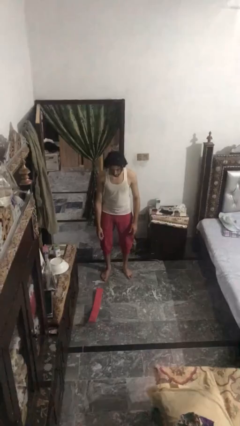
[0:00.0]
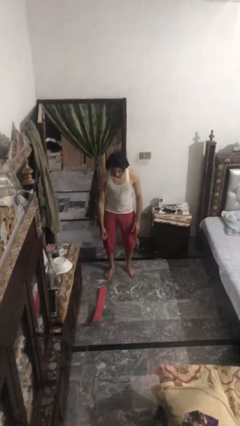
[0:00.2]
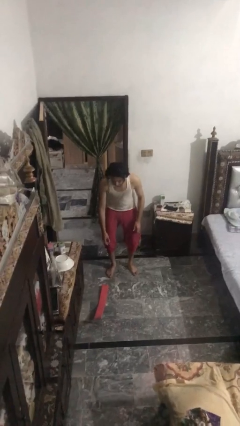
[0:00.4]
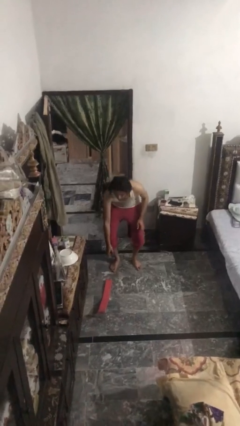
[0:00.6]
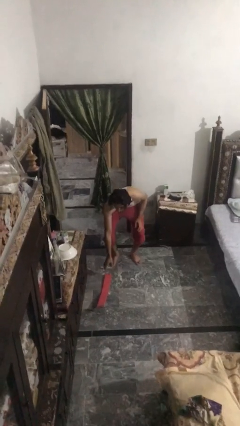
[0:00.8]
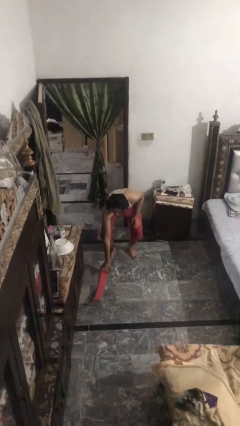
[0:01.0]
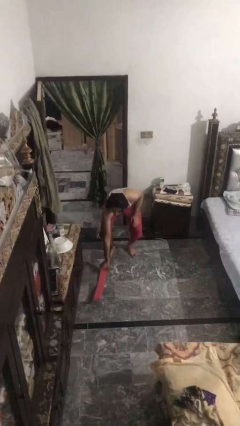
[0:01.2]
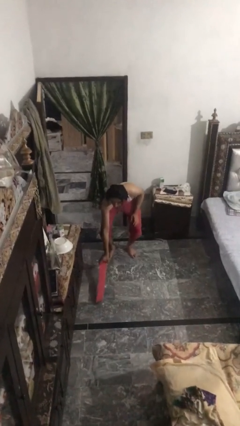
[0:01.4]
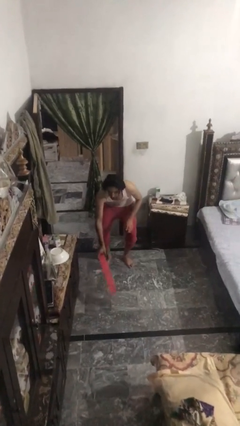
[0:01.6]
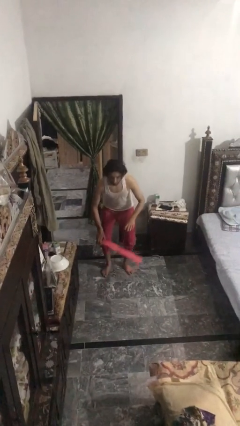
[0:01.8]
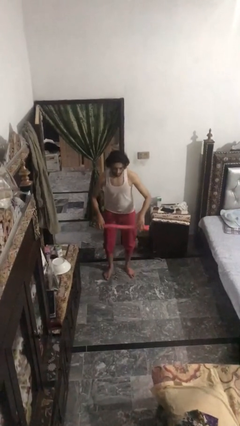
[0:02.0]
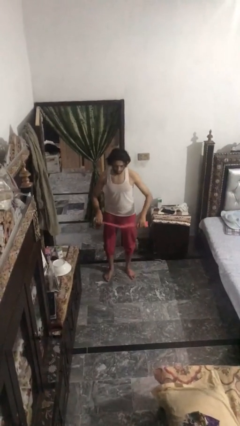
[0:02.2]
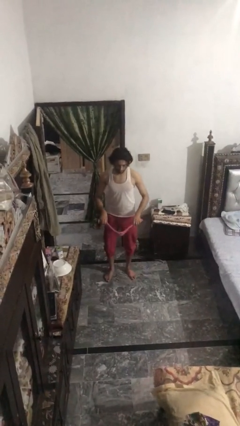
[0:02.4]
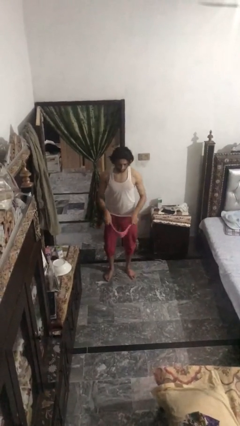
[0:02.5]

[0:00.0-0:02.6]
person picks up object from floor

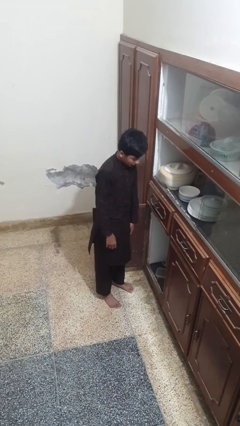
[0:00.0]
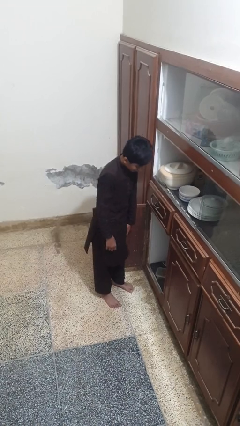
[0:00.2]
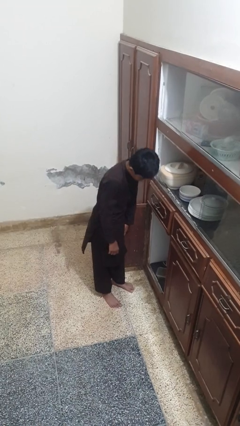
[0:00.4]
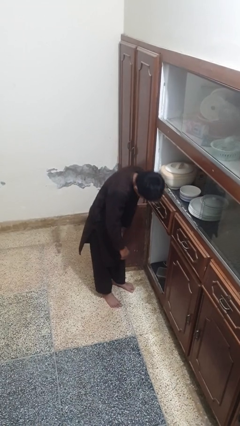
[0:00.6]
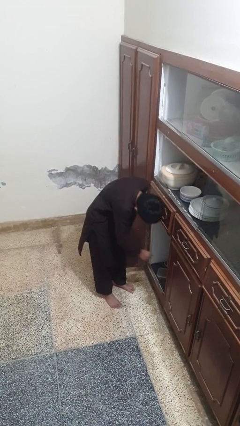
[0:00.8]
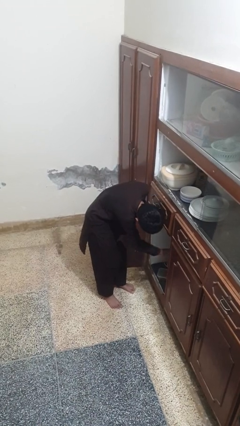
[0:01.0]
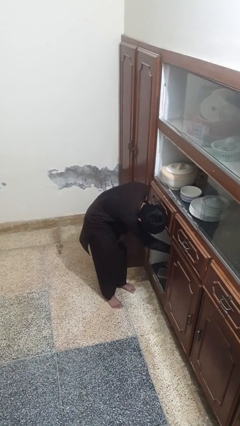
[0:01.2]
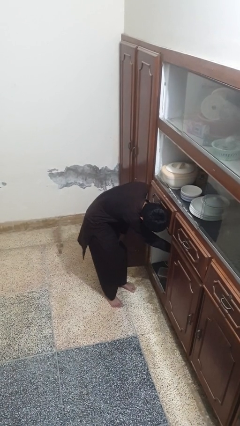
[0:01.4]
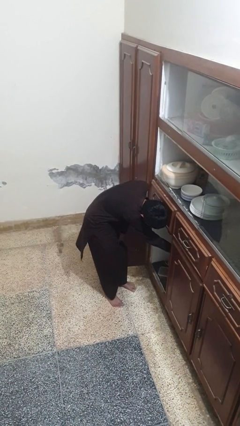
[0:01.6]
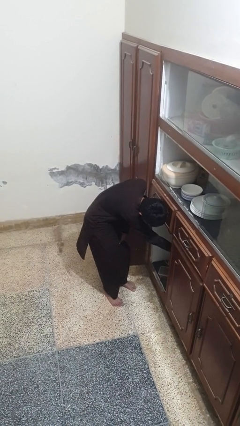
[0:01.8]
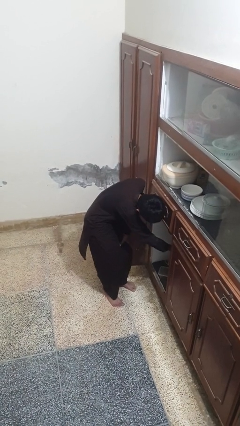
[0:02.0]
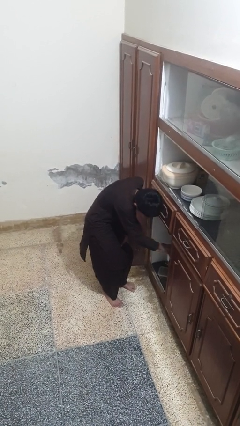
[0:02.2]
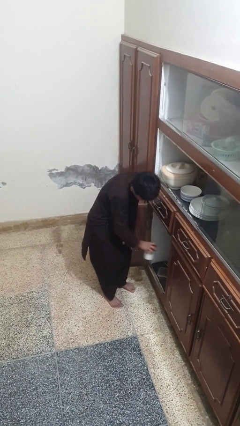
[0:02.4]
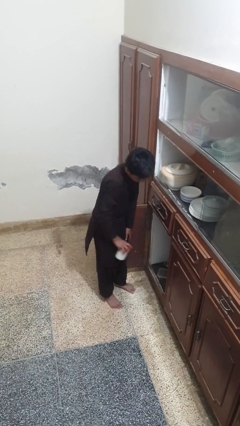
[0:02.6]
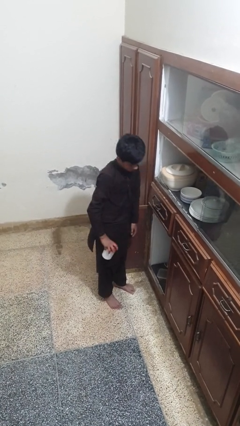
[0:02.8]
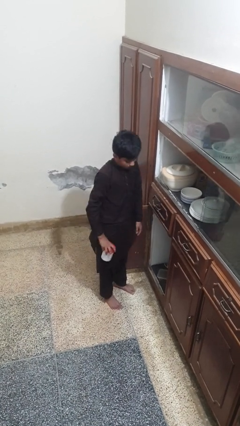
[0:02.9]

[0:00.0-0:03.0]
person takes object from cabinet

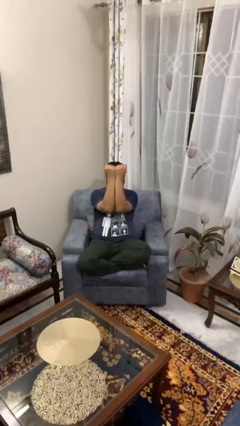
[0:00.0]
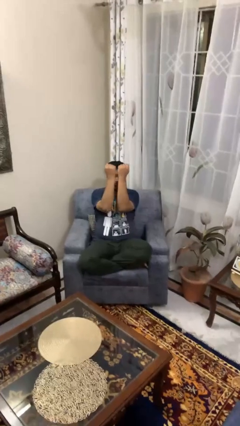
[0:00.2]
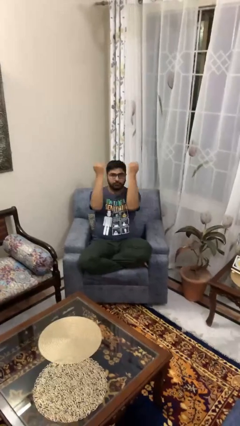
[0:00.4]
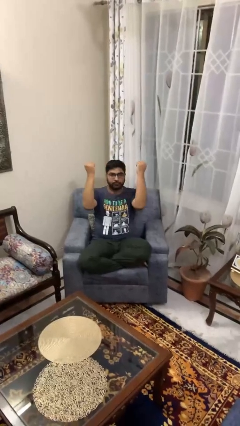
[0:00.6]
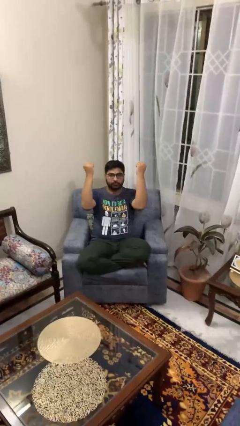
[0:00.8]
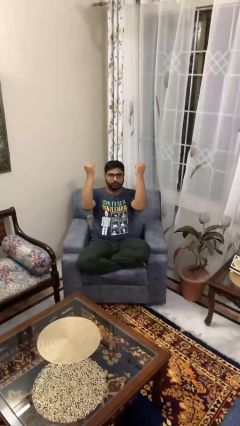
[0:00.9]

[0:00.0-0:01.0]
person gestures zoom out

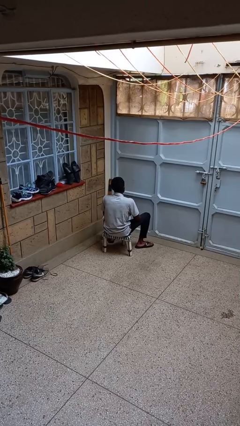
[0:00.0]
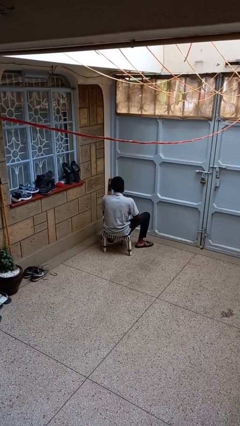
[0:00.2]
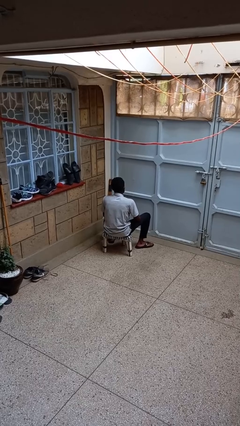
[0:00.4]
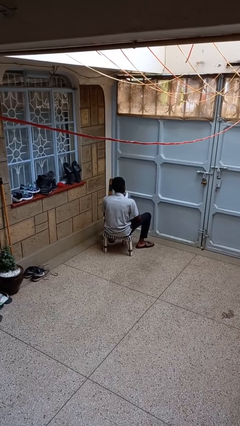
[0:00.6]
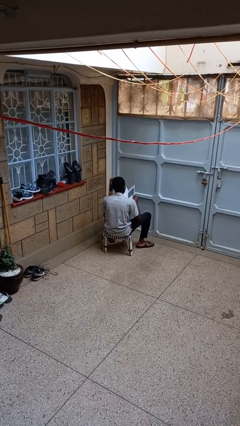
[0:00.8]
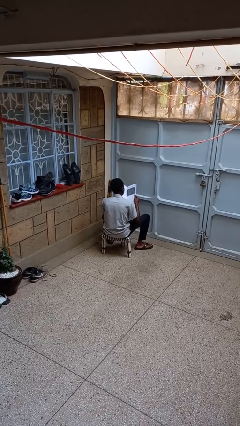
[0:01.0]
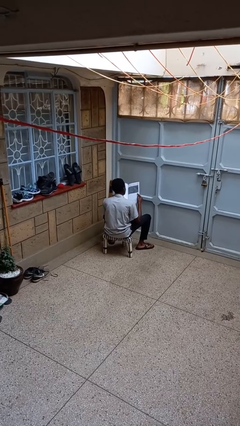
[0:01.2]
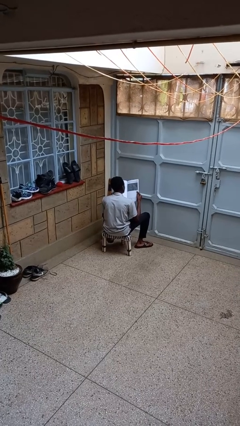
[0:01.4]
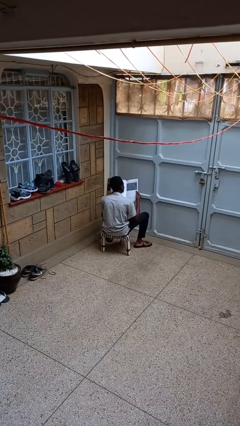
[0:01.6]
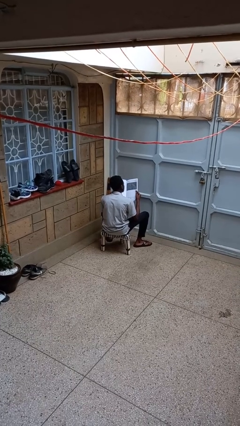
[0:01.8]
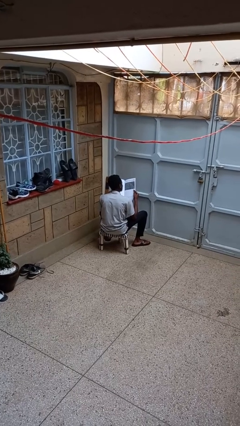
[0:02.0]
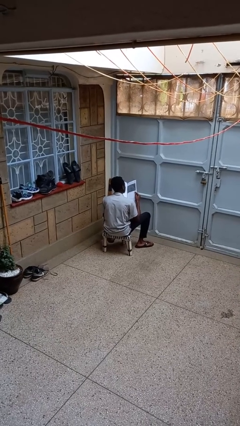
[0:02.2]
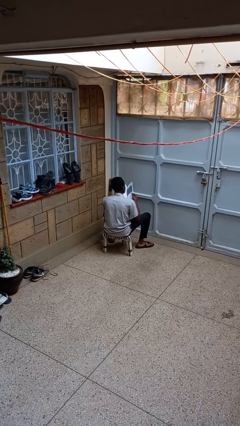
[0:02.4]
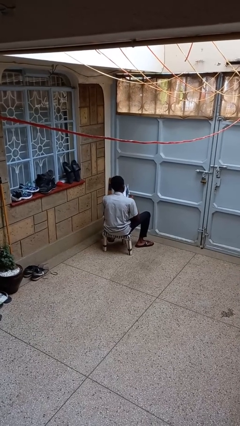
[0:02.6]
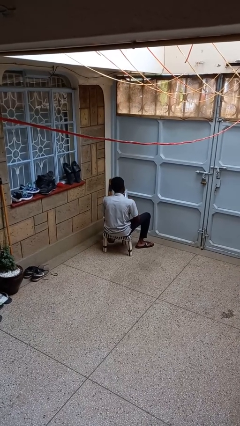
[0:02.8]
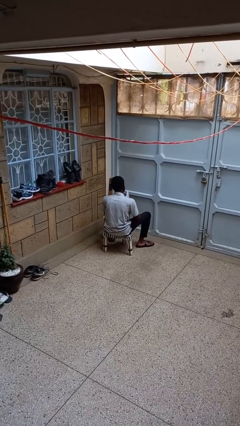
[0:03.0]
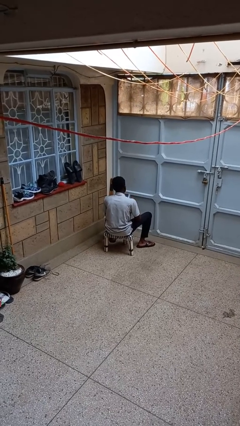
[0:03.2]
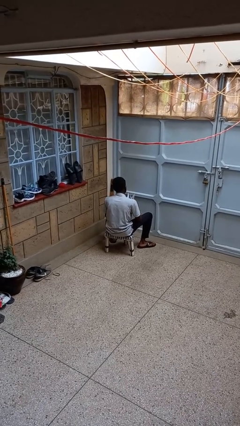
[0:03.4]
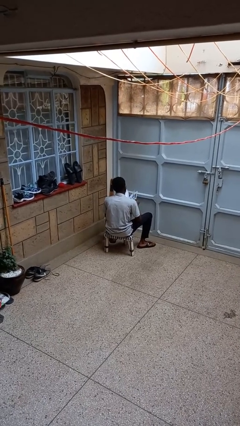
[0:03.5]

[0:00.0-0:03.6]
person reads magazine

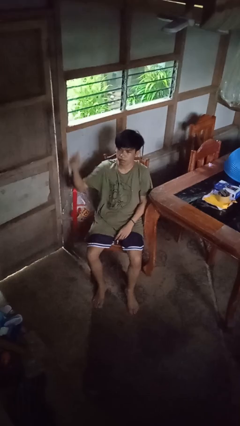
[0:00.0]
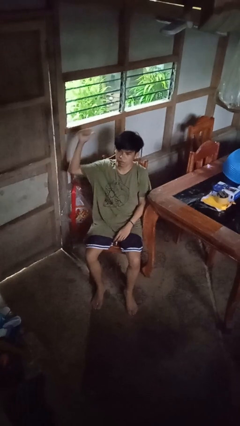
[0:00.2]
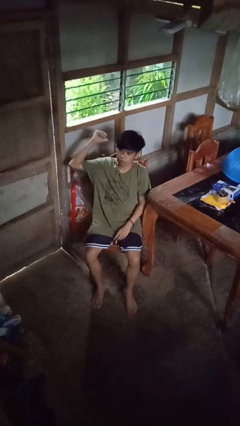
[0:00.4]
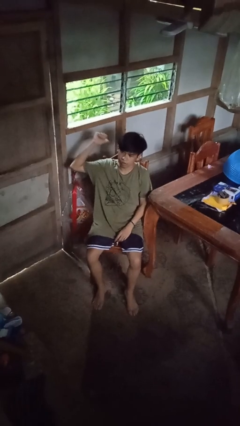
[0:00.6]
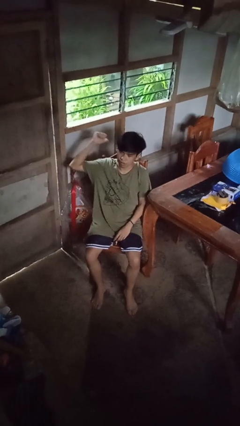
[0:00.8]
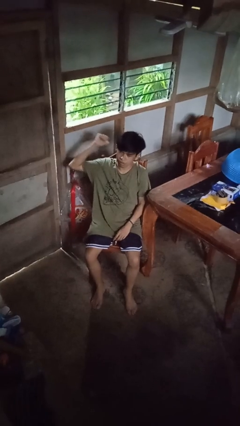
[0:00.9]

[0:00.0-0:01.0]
person gestures behind me

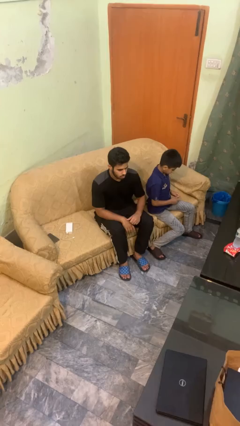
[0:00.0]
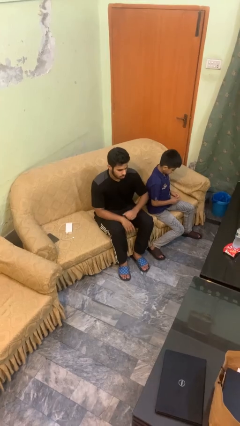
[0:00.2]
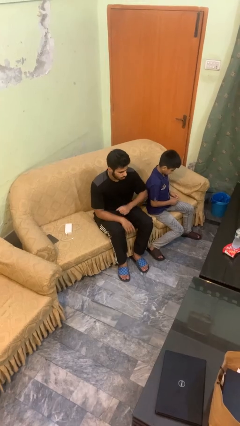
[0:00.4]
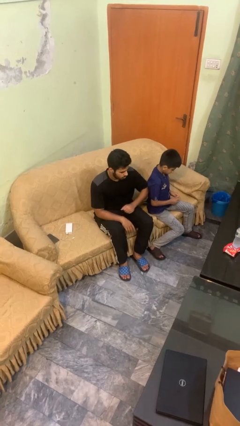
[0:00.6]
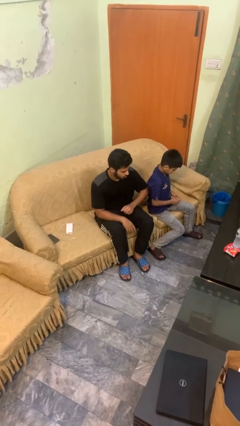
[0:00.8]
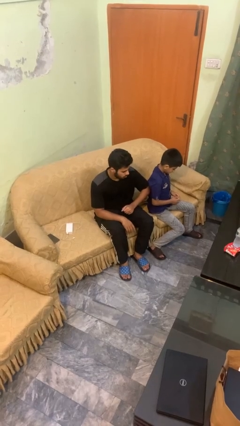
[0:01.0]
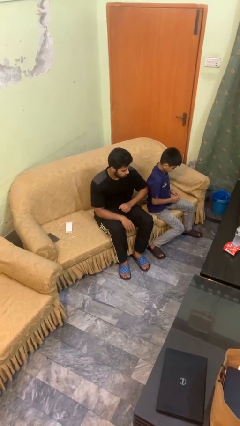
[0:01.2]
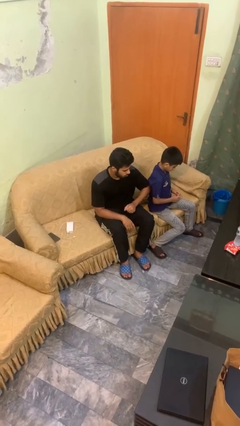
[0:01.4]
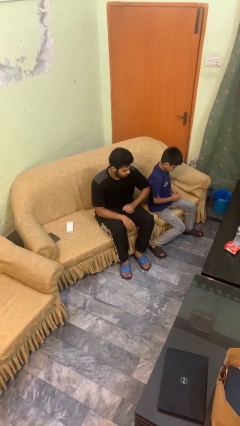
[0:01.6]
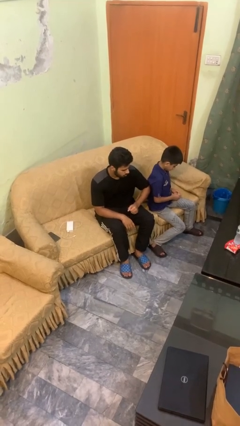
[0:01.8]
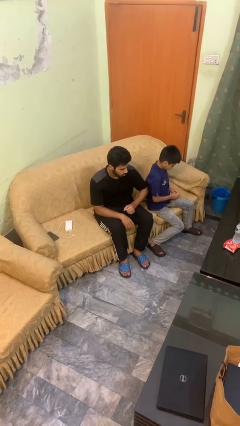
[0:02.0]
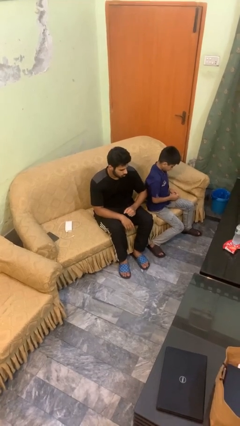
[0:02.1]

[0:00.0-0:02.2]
person nudges person with elbow

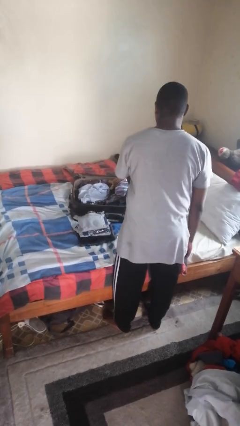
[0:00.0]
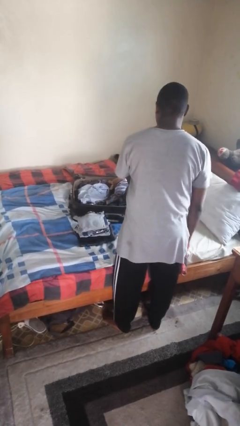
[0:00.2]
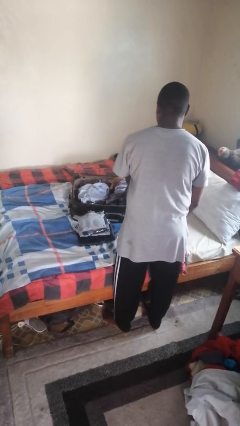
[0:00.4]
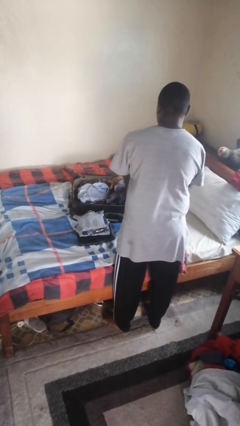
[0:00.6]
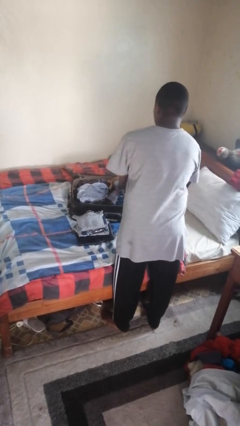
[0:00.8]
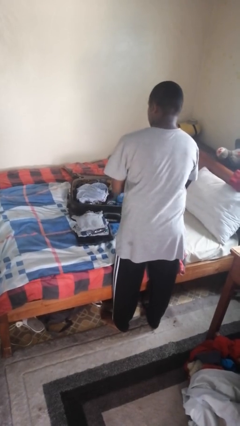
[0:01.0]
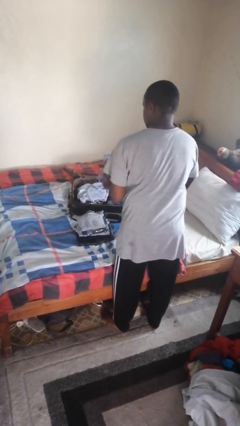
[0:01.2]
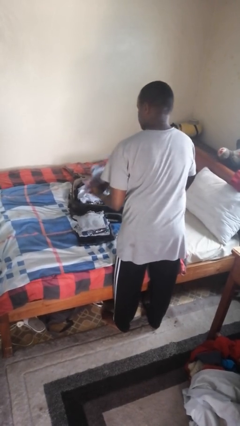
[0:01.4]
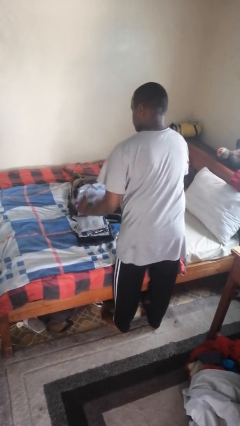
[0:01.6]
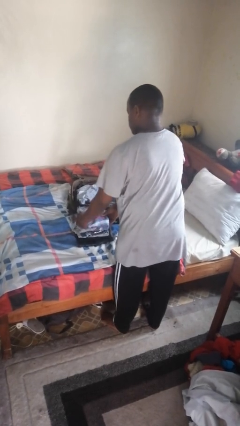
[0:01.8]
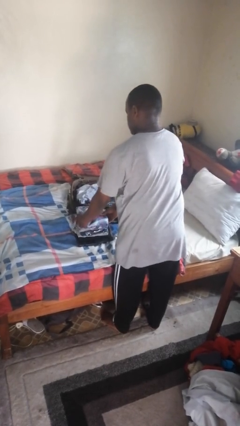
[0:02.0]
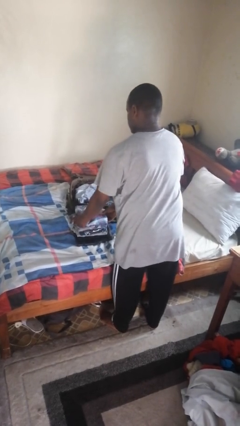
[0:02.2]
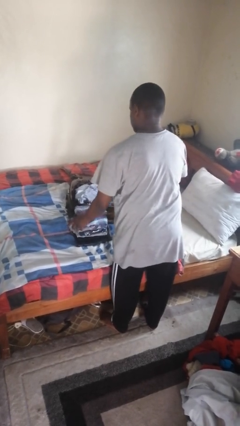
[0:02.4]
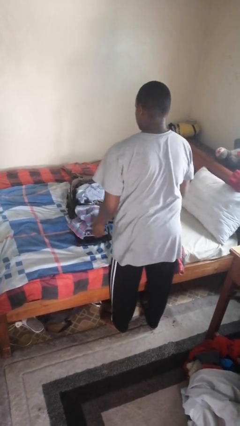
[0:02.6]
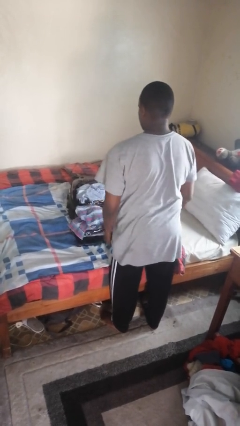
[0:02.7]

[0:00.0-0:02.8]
person unloads clothes from suitcase

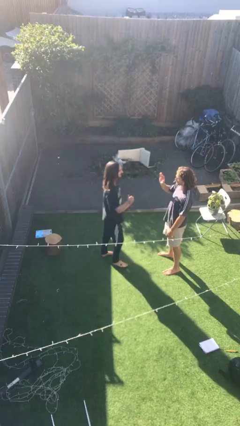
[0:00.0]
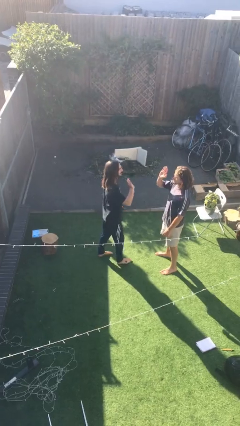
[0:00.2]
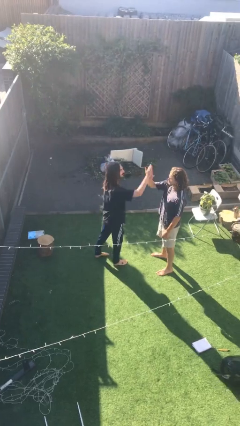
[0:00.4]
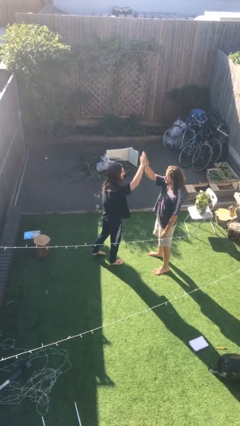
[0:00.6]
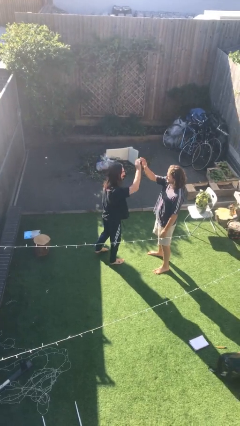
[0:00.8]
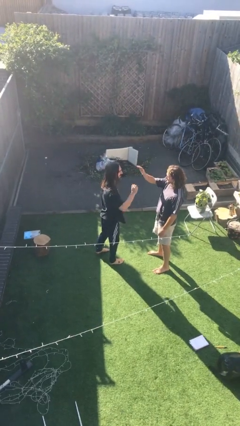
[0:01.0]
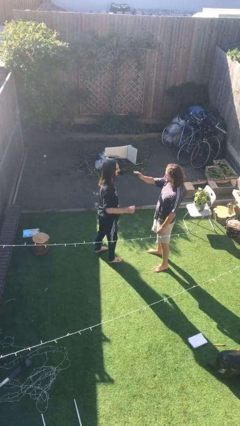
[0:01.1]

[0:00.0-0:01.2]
person highfives hand
